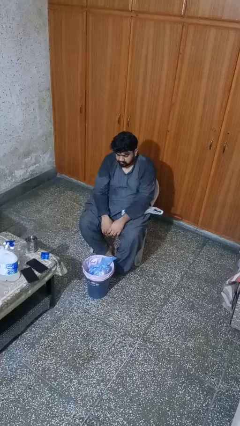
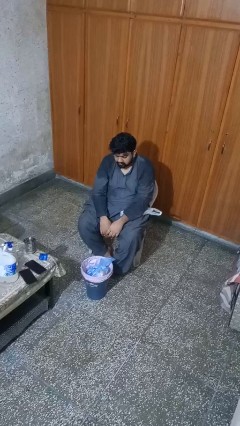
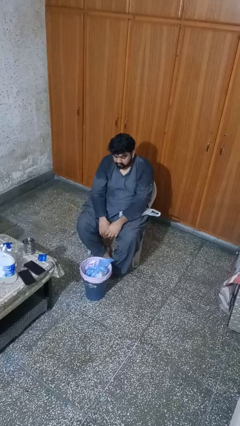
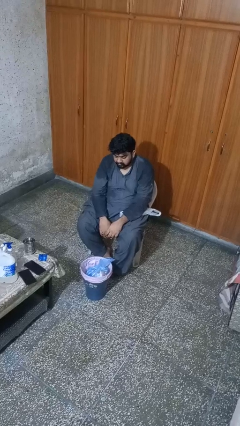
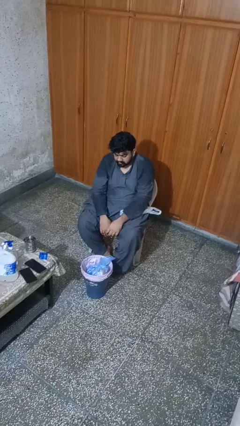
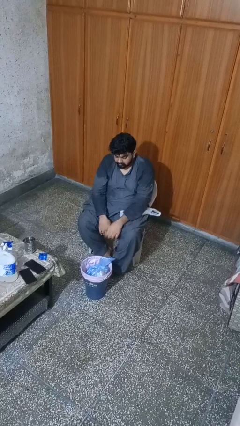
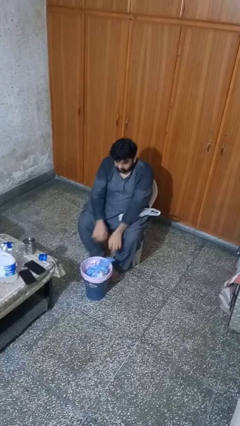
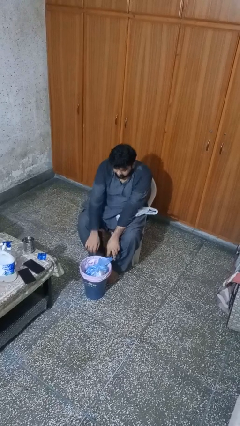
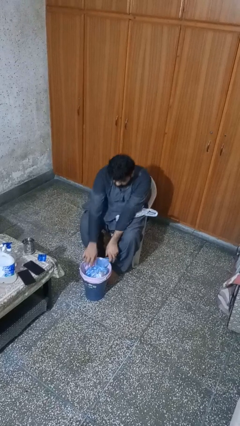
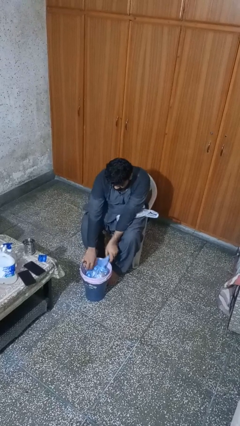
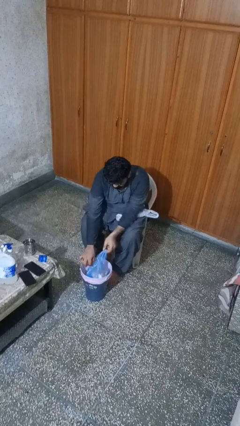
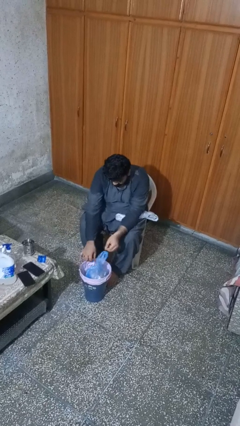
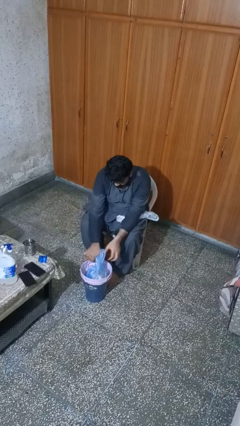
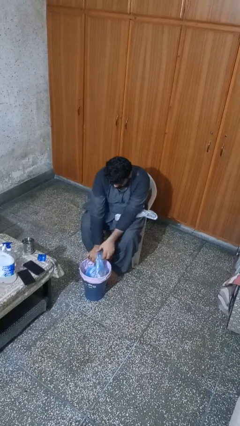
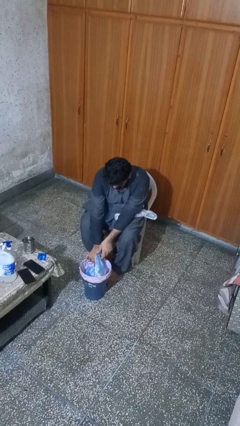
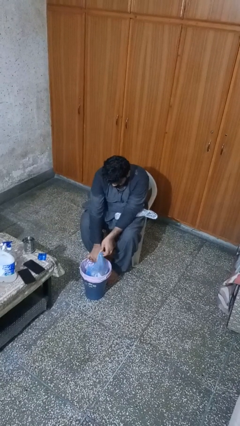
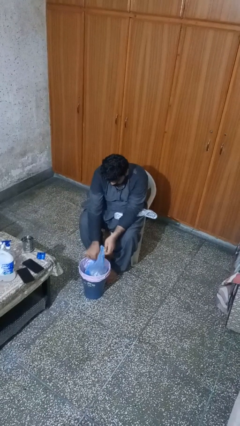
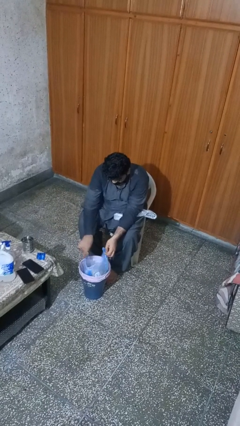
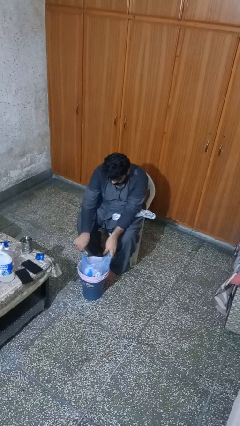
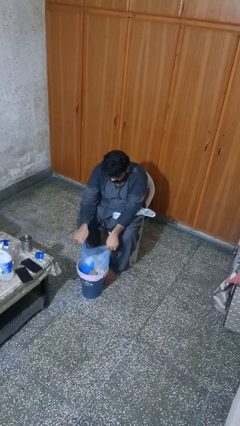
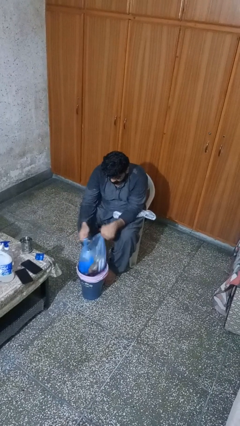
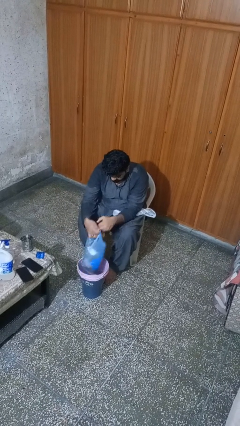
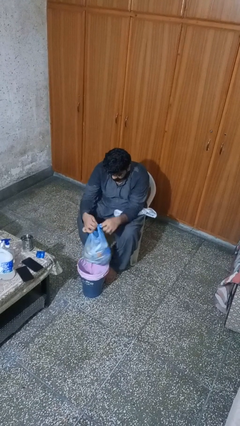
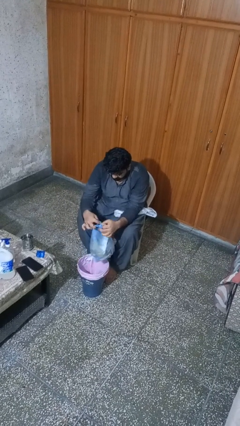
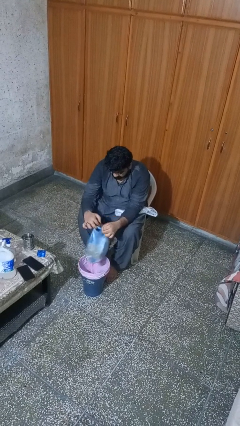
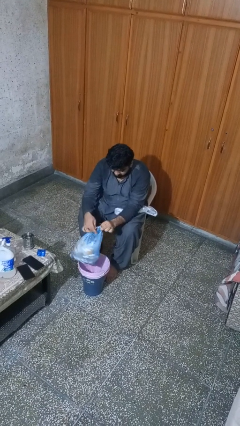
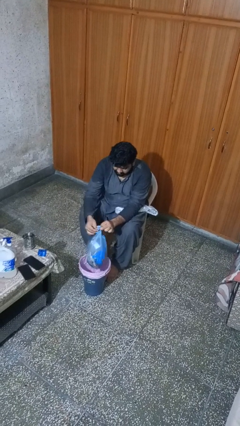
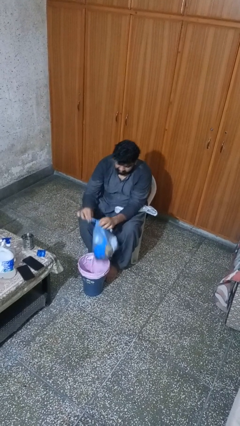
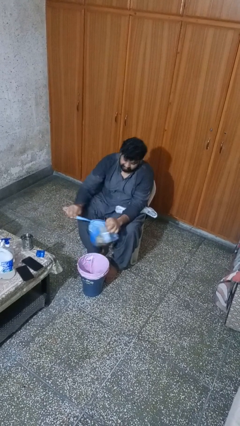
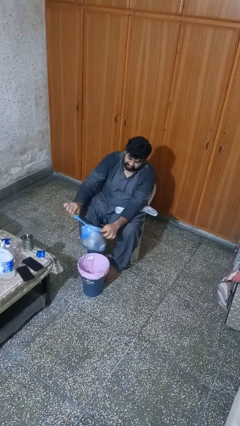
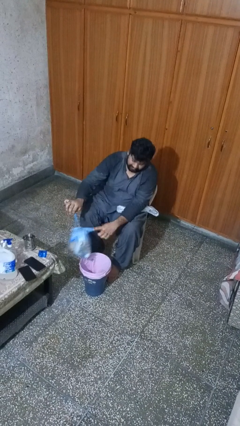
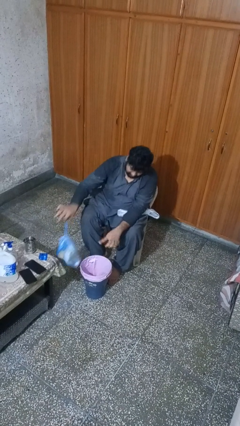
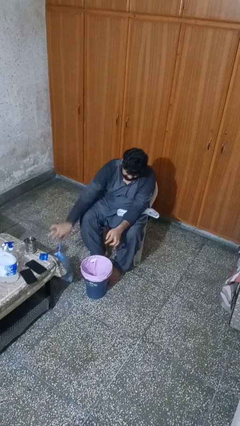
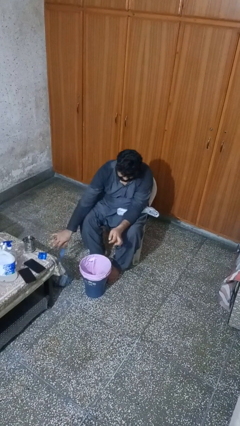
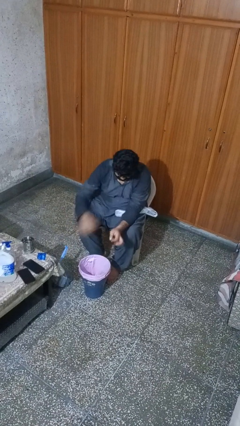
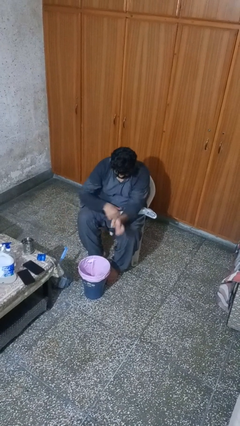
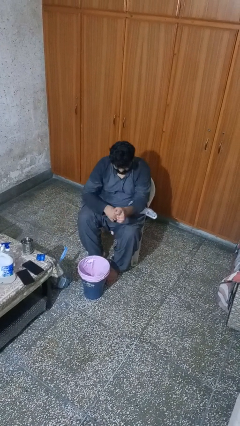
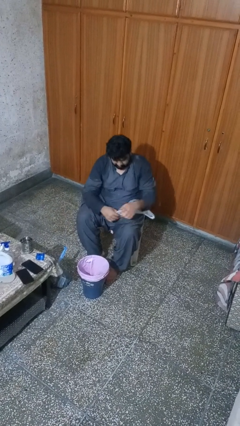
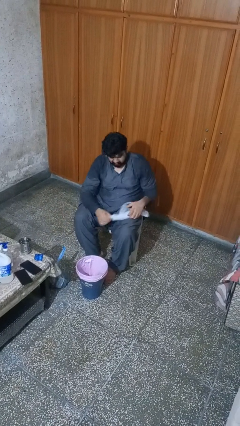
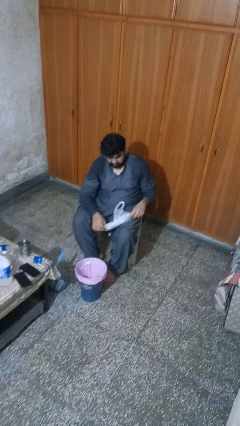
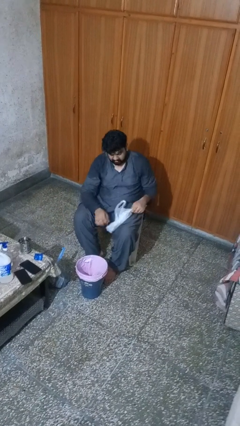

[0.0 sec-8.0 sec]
person removes trashbag from trashcan

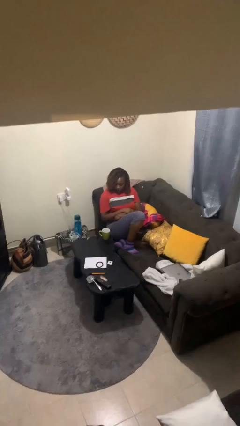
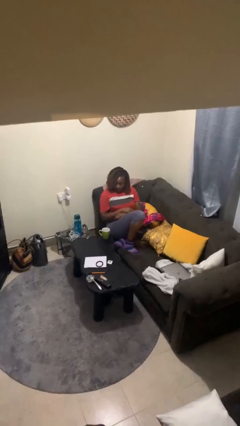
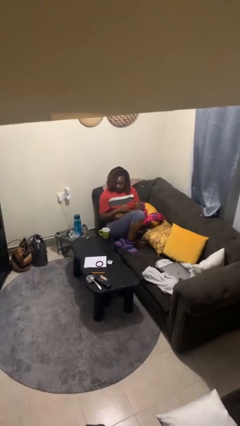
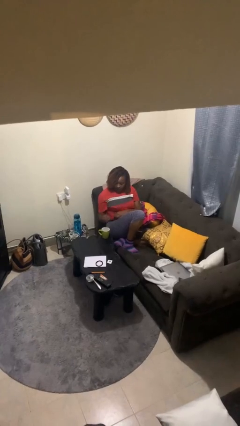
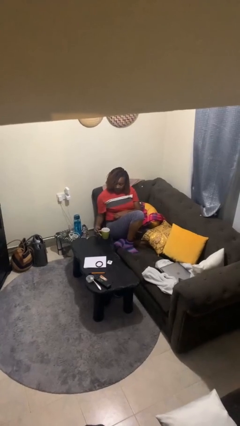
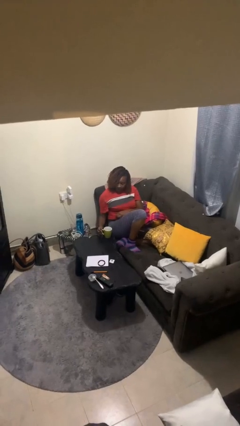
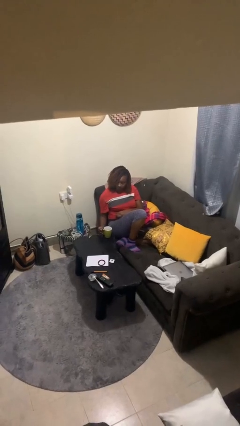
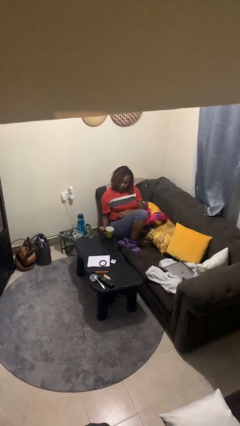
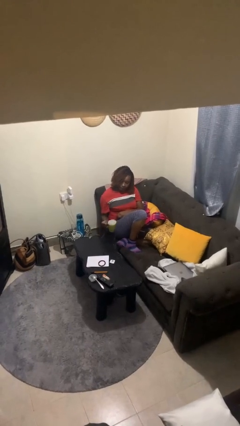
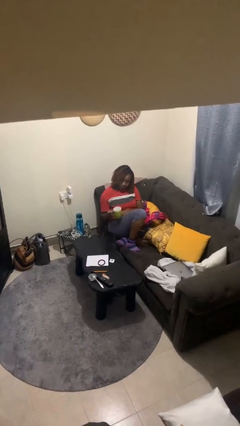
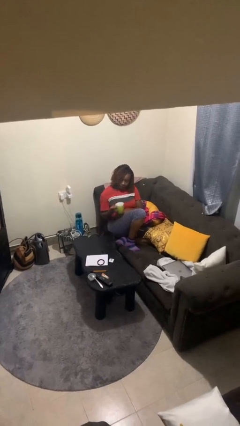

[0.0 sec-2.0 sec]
person picks up object from table

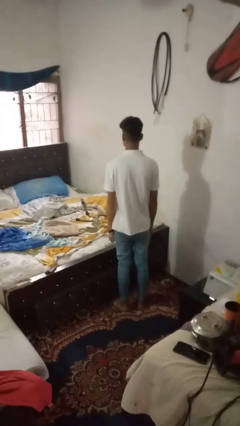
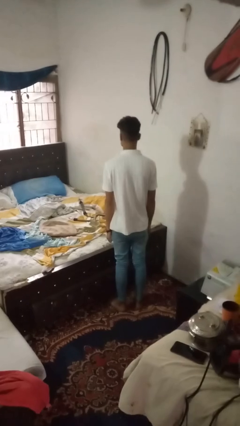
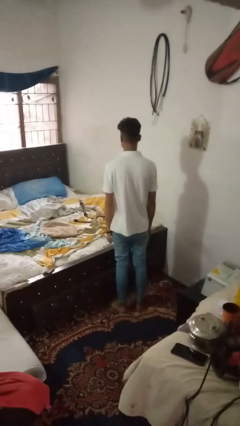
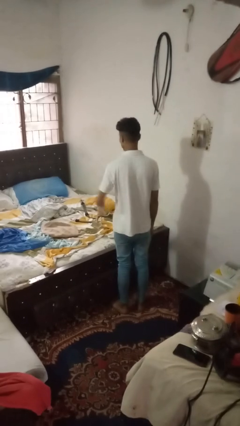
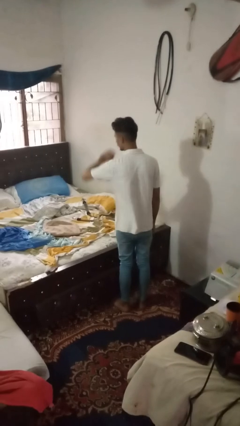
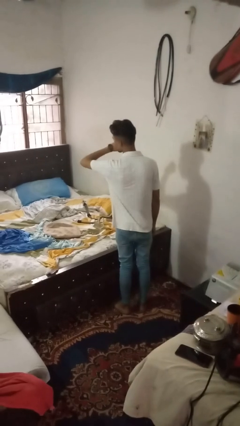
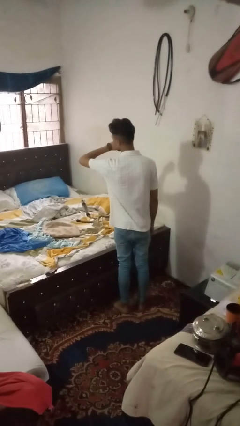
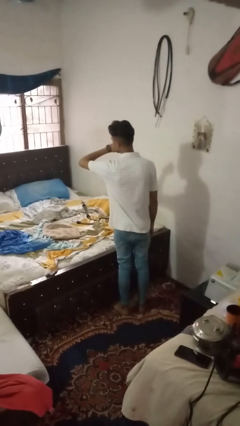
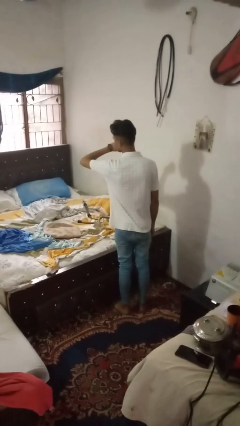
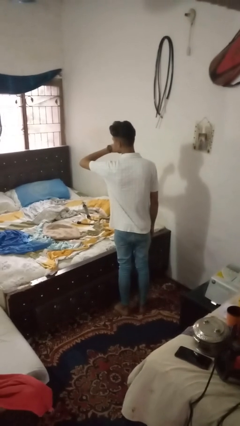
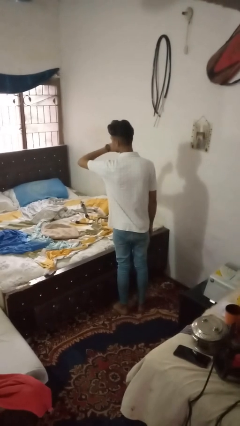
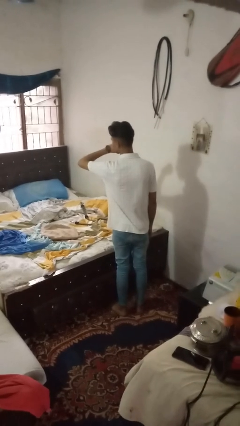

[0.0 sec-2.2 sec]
person gestures watch closely

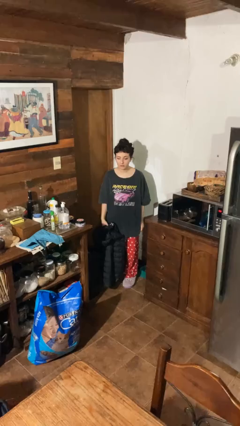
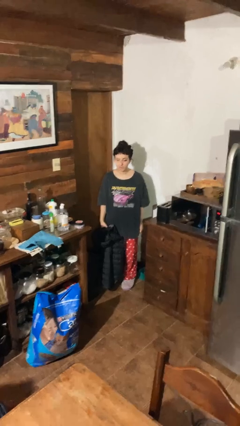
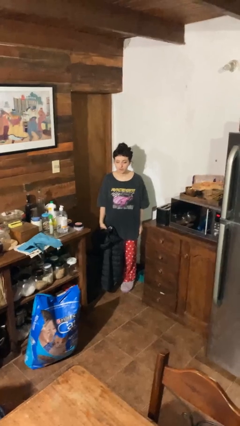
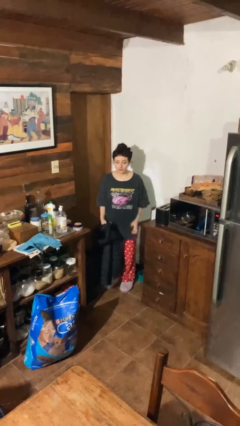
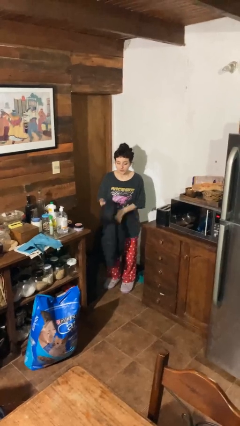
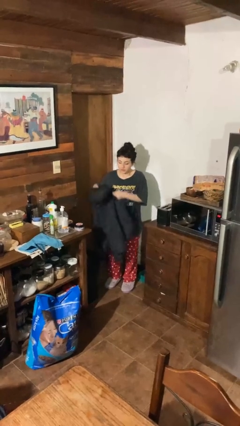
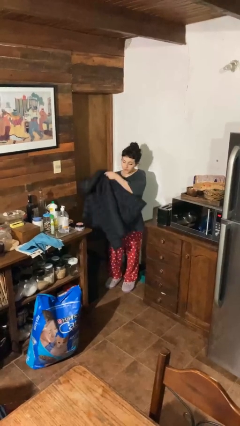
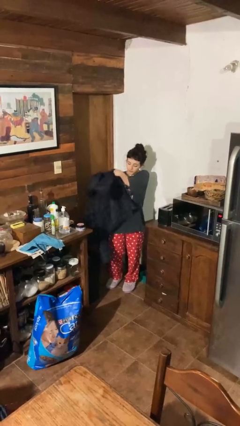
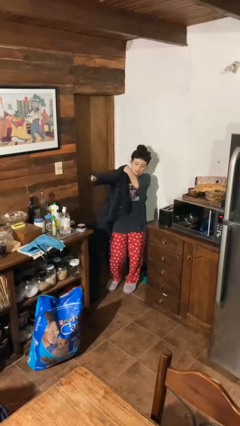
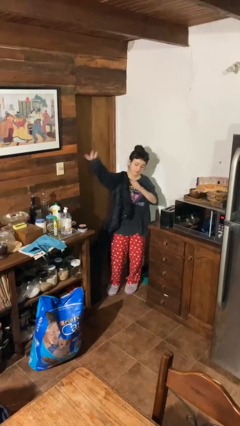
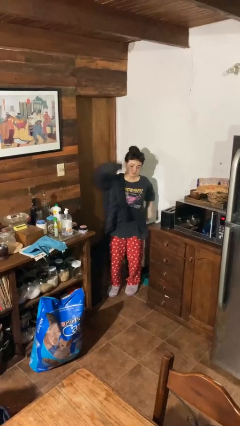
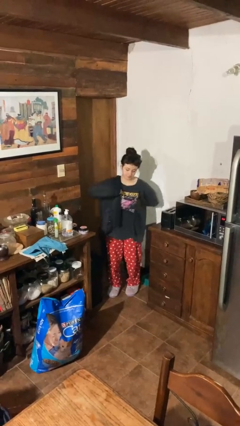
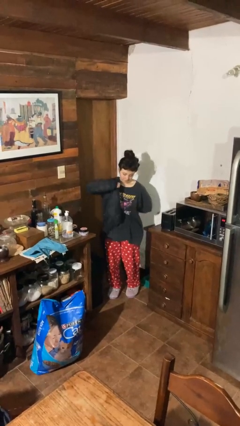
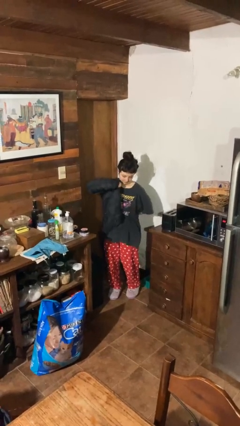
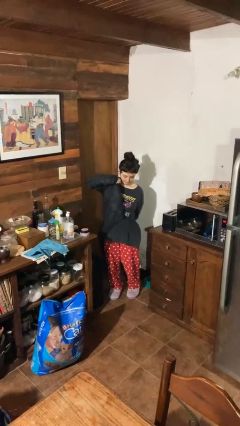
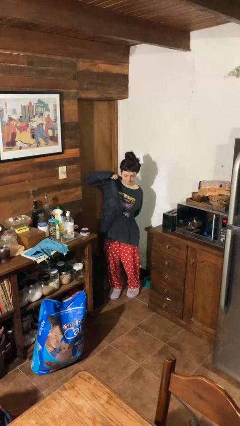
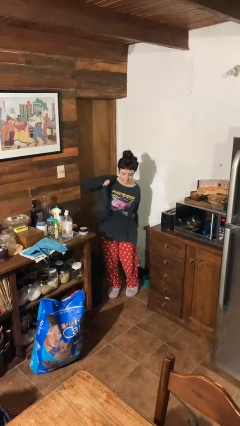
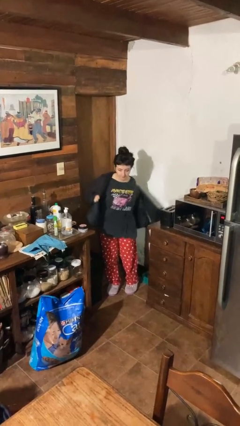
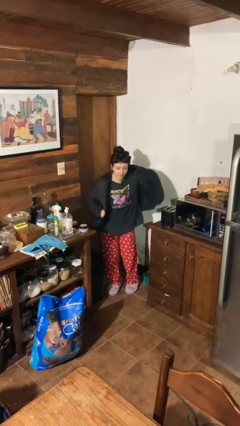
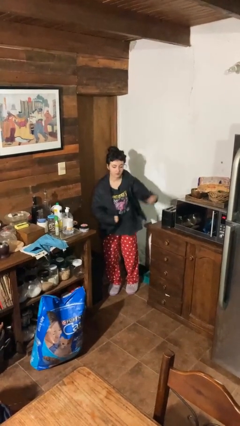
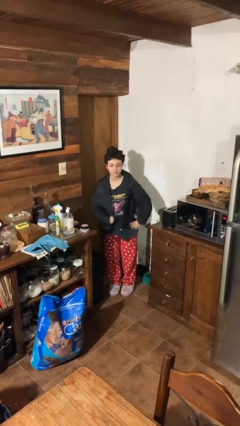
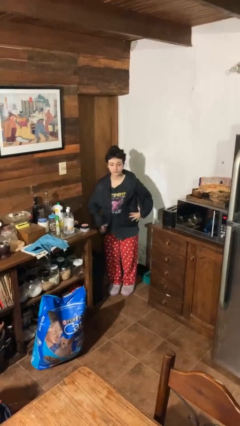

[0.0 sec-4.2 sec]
person puts on jacket

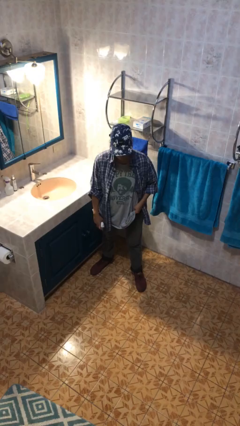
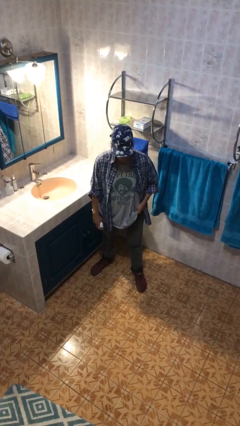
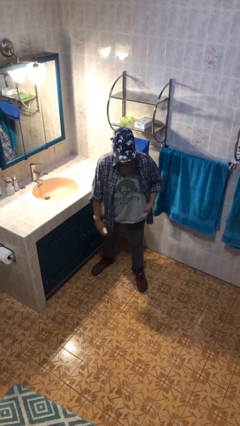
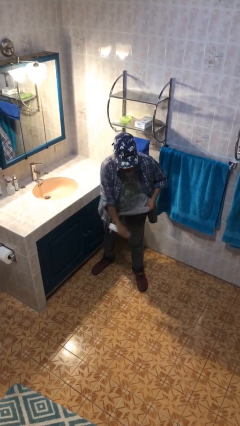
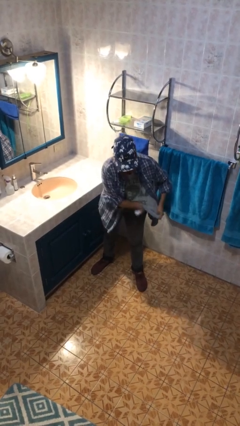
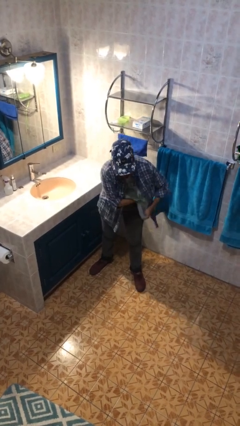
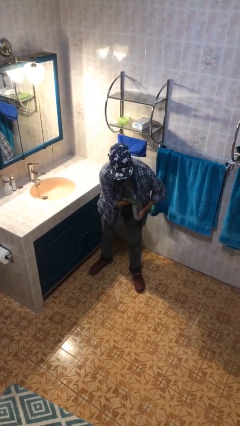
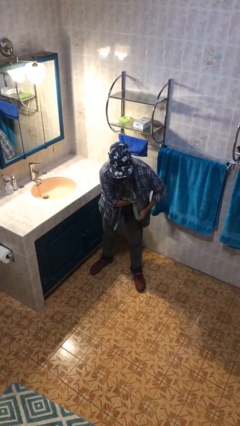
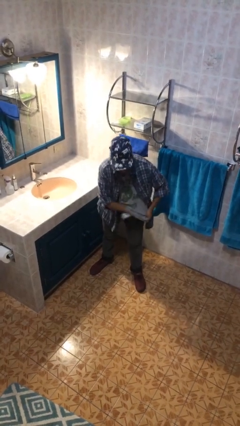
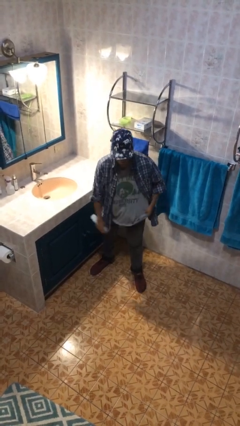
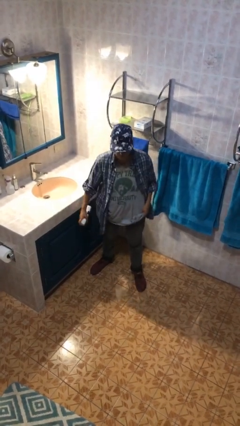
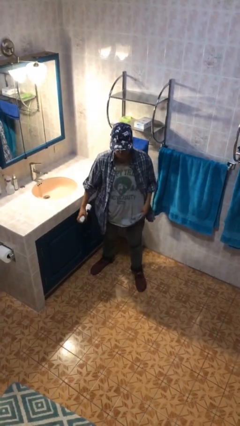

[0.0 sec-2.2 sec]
person applies deodorant
